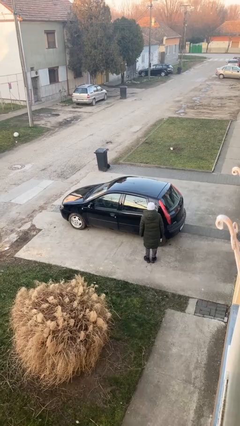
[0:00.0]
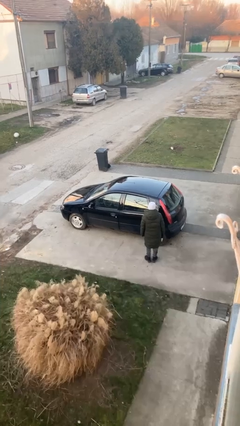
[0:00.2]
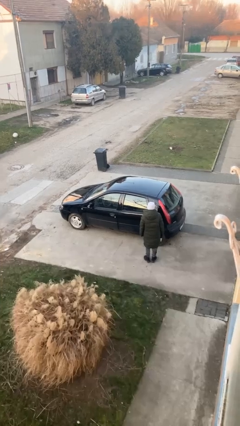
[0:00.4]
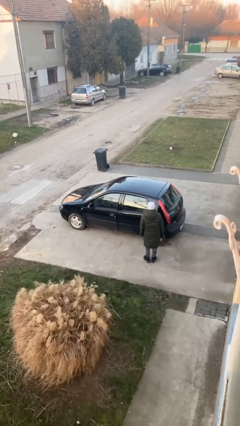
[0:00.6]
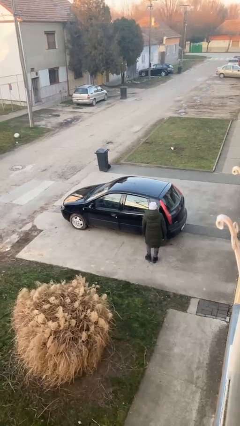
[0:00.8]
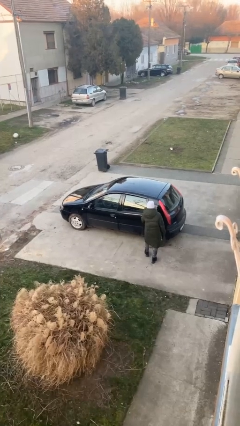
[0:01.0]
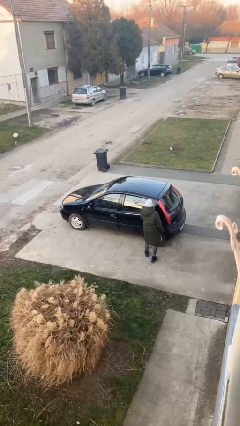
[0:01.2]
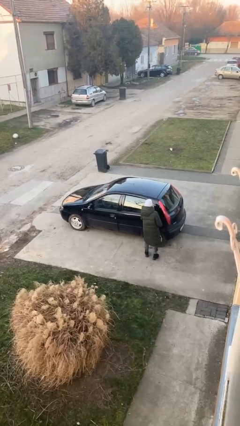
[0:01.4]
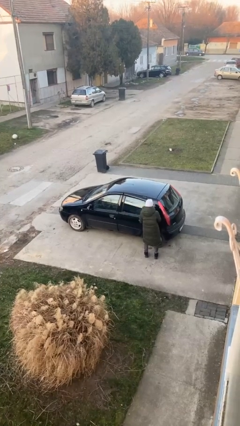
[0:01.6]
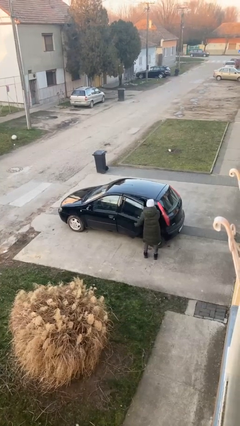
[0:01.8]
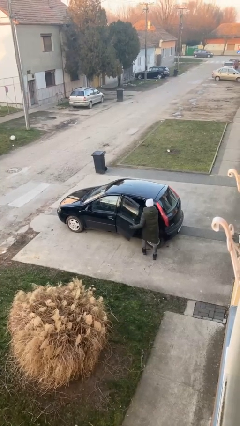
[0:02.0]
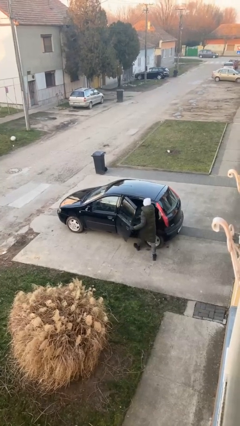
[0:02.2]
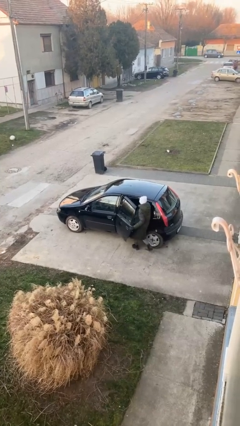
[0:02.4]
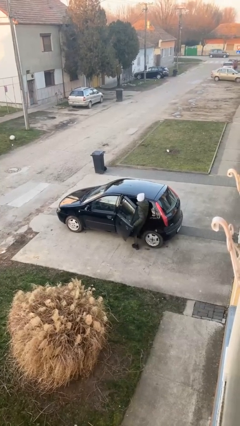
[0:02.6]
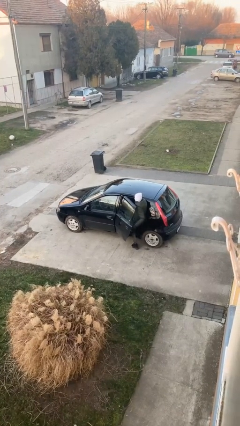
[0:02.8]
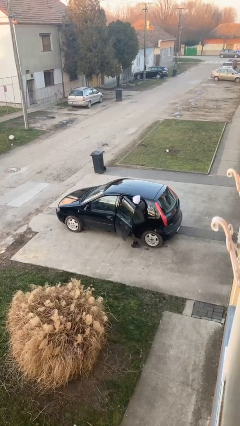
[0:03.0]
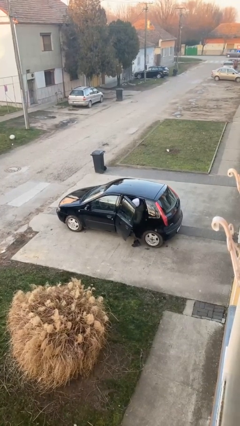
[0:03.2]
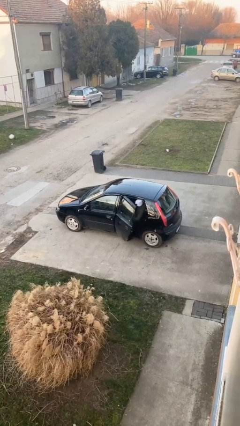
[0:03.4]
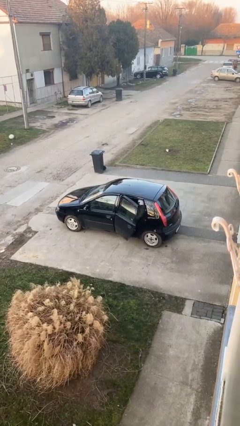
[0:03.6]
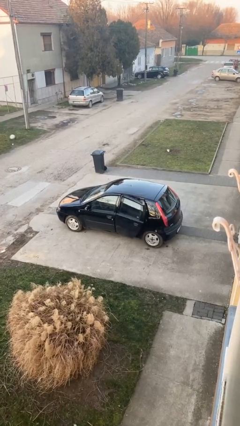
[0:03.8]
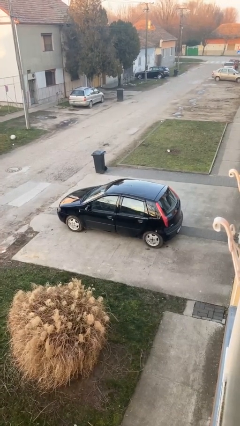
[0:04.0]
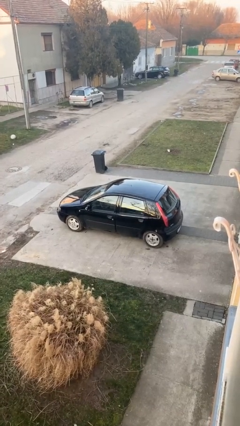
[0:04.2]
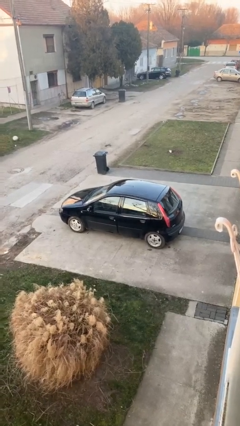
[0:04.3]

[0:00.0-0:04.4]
car picks up person

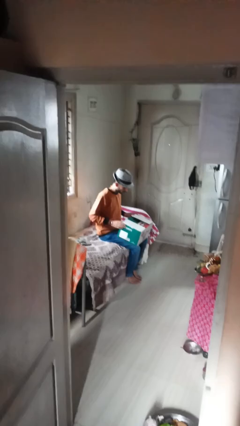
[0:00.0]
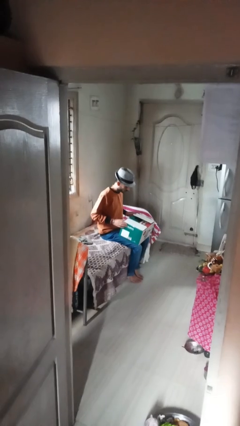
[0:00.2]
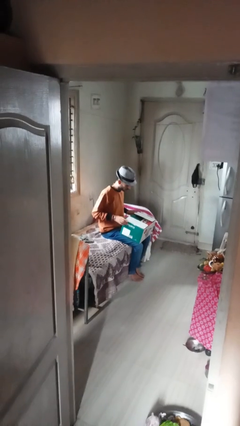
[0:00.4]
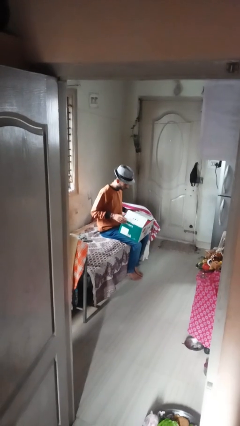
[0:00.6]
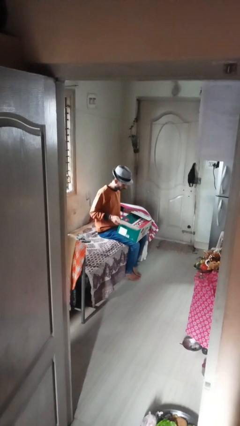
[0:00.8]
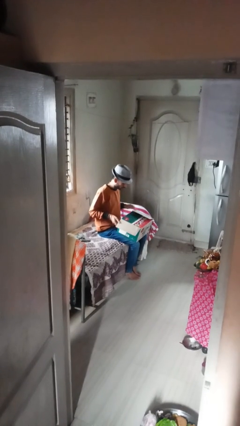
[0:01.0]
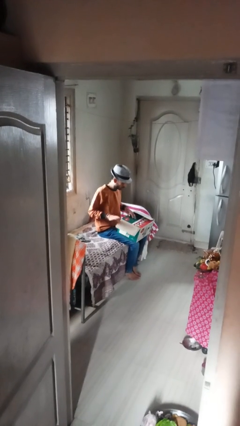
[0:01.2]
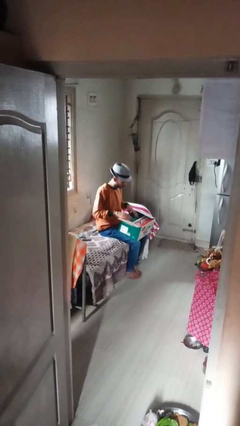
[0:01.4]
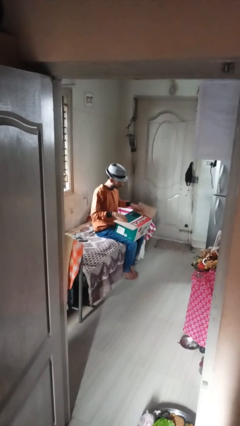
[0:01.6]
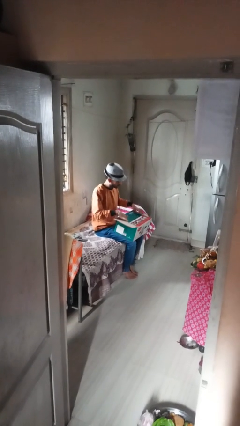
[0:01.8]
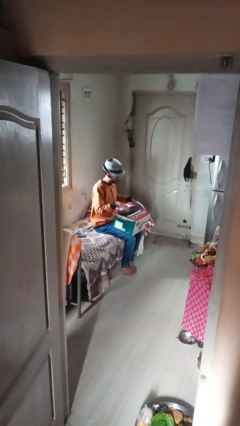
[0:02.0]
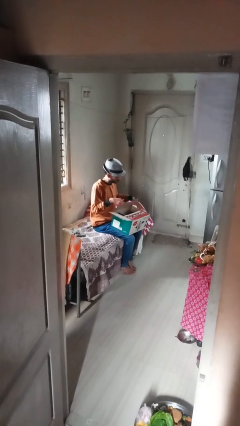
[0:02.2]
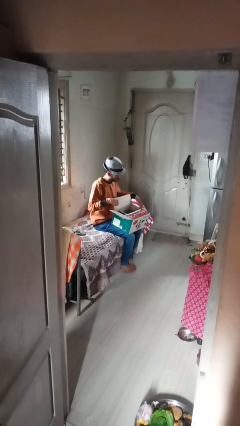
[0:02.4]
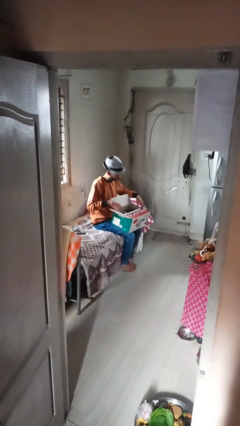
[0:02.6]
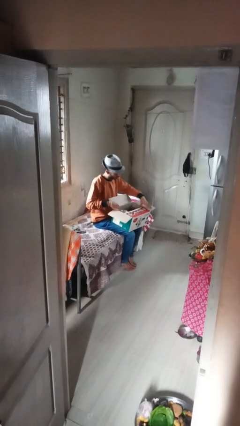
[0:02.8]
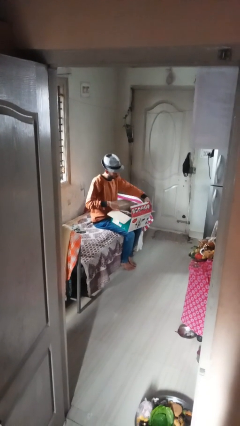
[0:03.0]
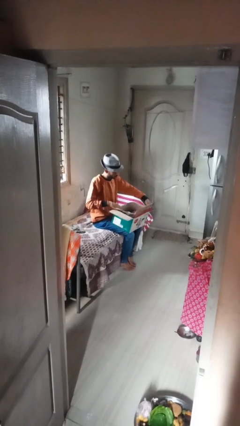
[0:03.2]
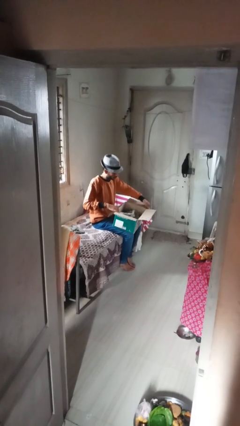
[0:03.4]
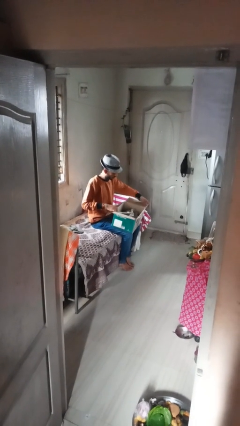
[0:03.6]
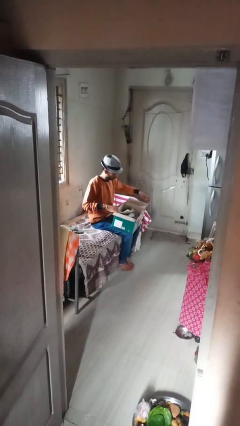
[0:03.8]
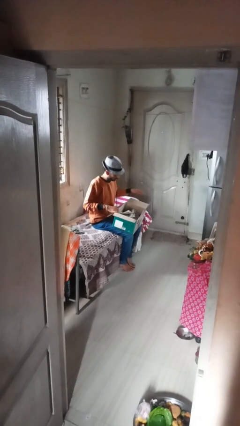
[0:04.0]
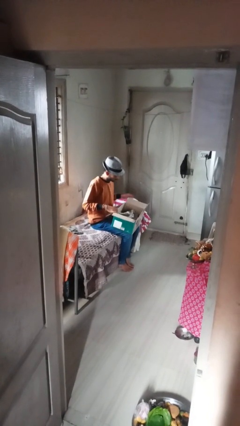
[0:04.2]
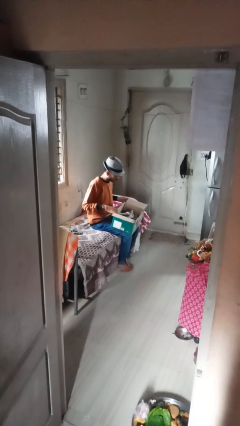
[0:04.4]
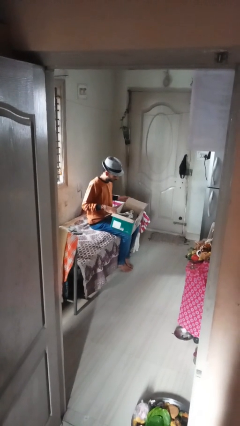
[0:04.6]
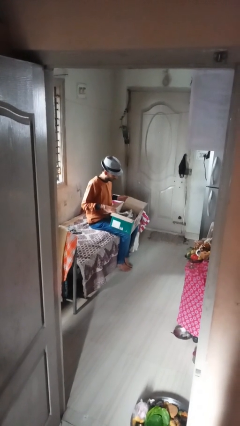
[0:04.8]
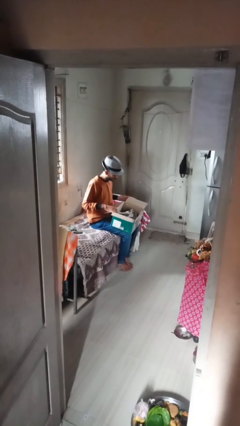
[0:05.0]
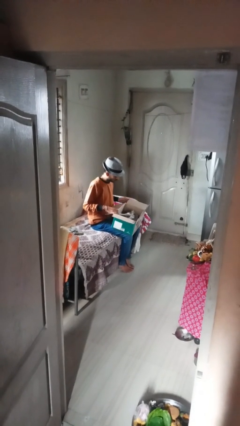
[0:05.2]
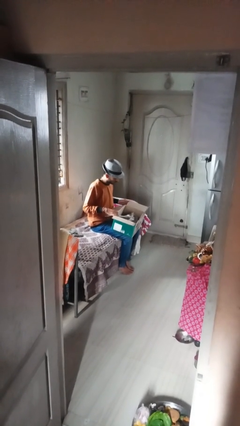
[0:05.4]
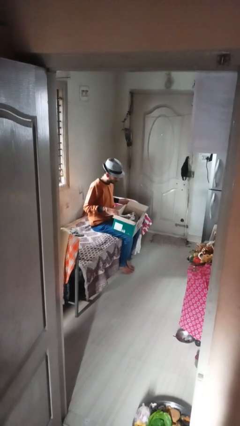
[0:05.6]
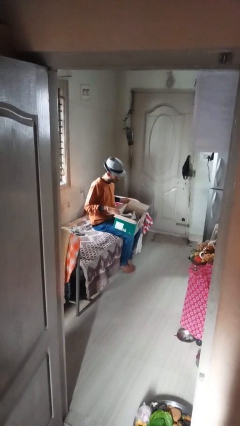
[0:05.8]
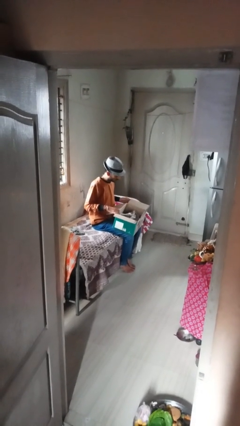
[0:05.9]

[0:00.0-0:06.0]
person opens box

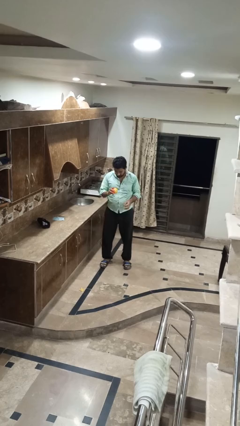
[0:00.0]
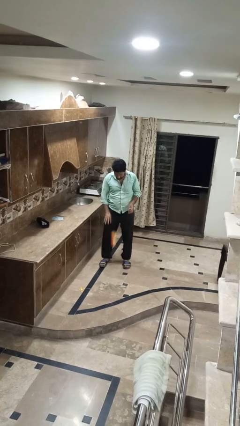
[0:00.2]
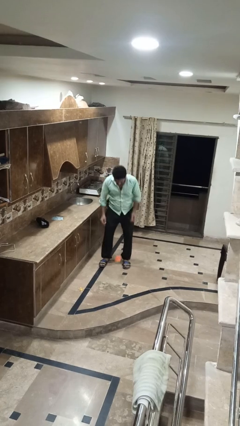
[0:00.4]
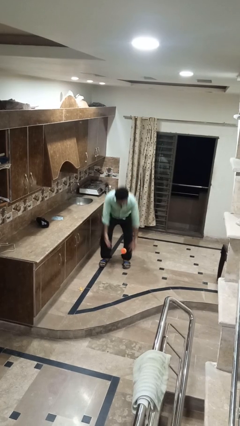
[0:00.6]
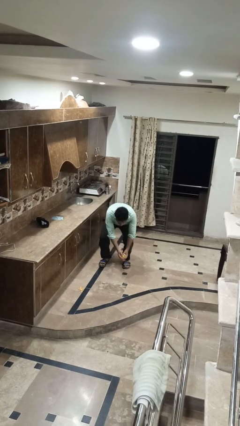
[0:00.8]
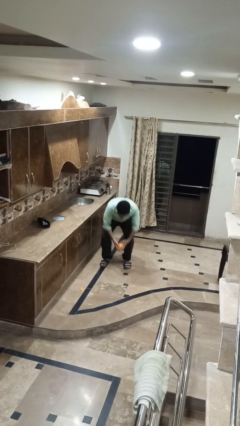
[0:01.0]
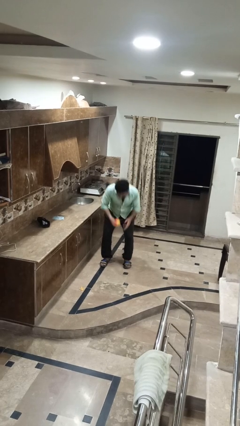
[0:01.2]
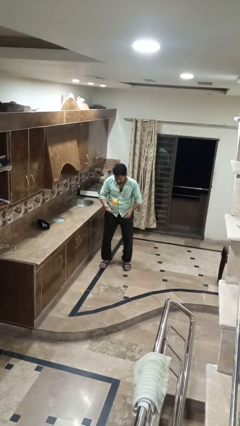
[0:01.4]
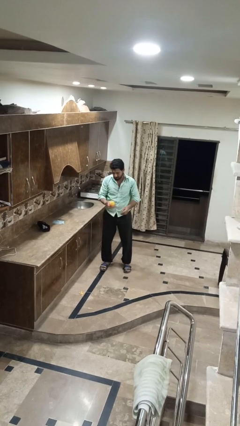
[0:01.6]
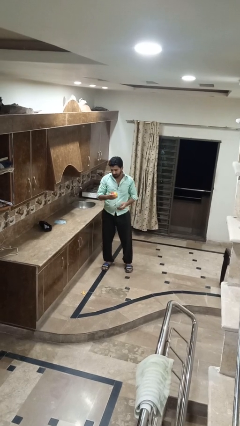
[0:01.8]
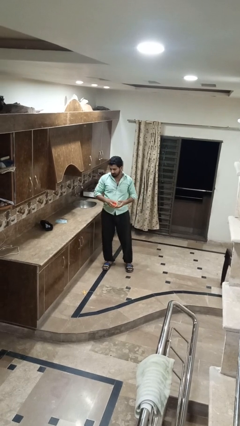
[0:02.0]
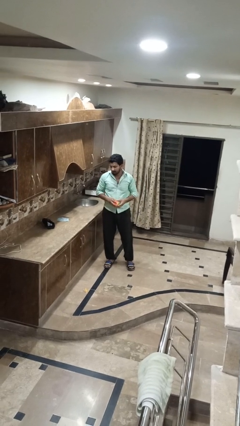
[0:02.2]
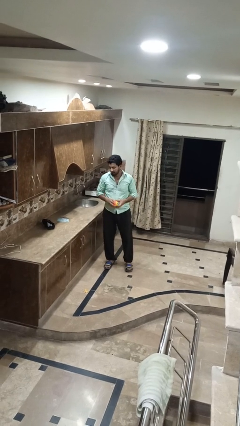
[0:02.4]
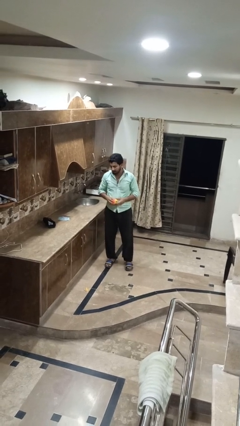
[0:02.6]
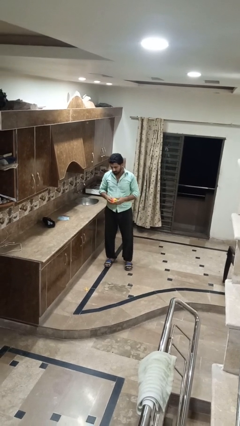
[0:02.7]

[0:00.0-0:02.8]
person bounces ball on floor

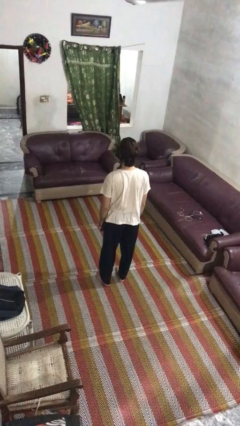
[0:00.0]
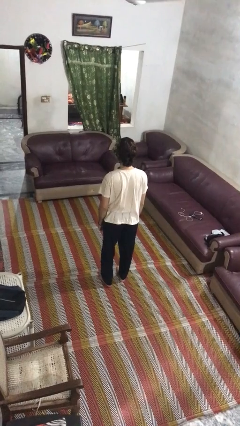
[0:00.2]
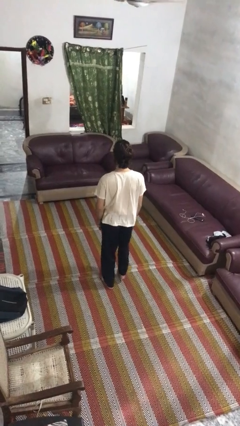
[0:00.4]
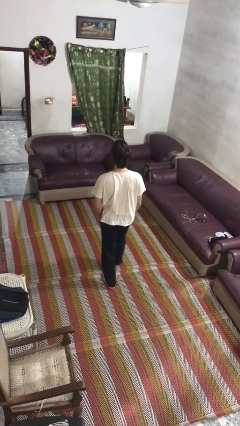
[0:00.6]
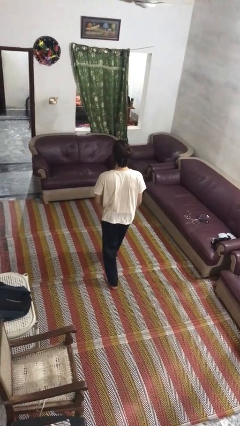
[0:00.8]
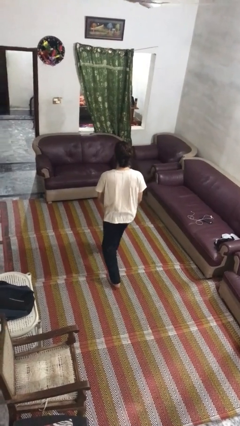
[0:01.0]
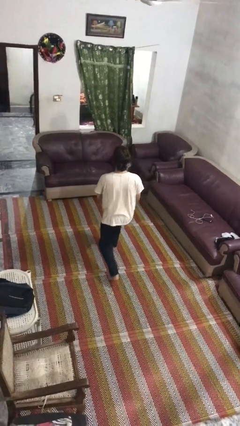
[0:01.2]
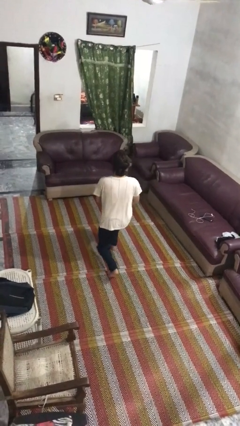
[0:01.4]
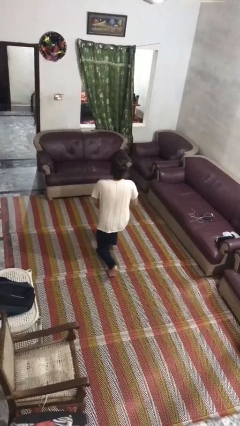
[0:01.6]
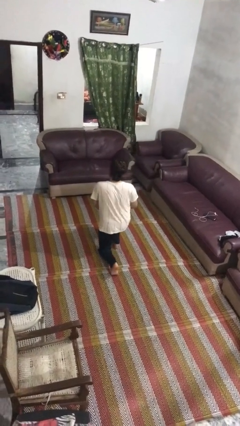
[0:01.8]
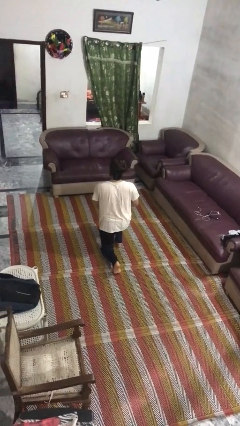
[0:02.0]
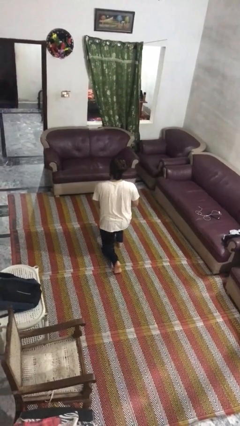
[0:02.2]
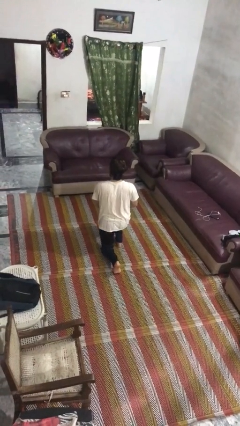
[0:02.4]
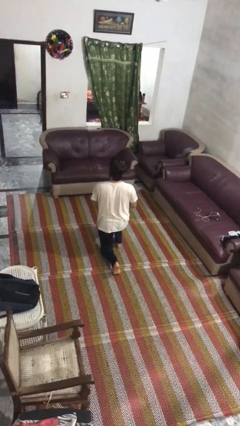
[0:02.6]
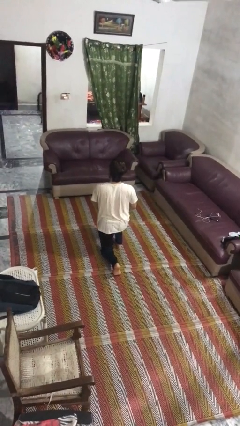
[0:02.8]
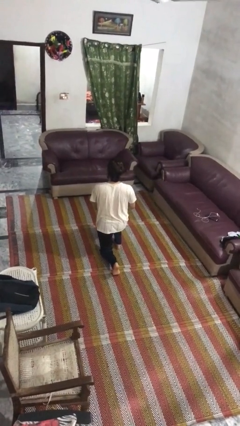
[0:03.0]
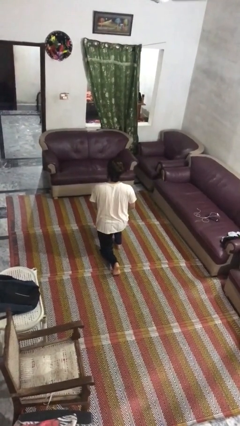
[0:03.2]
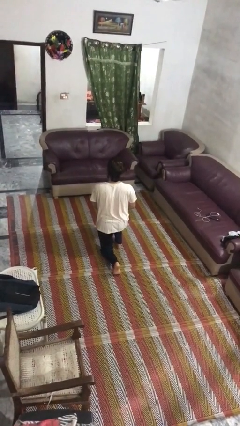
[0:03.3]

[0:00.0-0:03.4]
person kneels

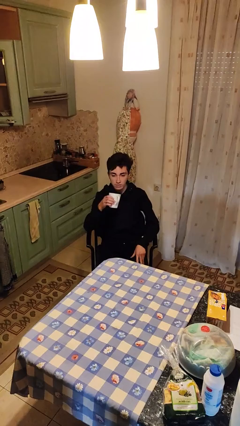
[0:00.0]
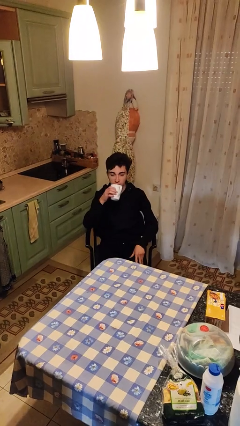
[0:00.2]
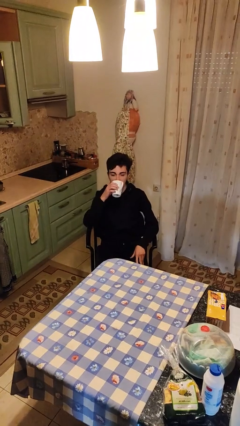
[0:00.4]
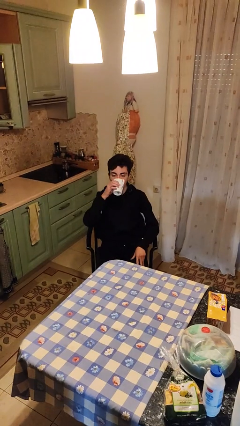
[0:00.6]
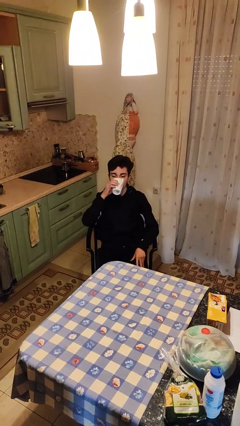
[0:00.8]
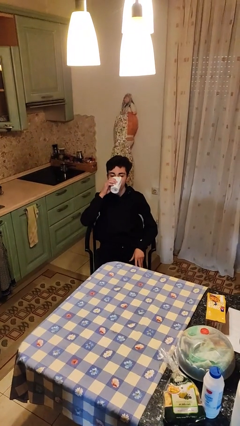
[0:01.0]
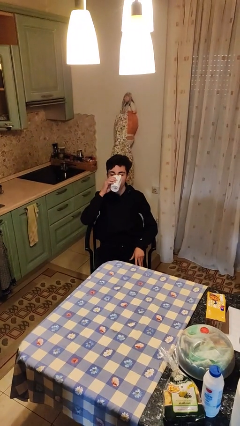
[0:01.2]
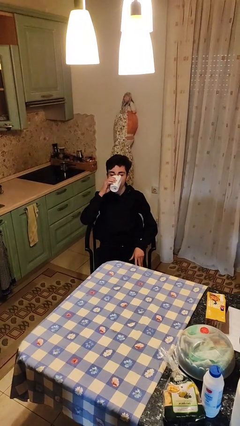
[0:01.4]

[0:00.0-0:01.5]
person drinks from mug
